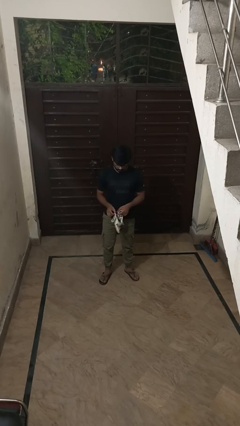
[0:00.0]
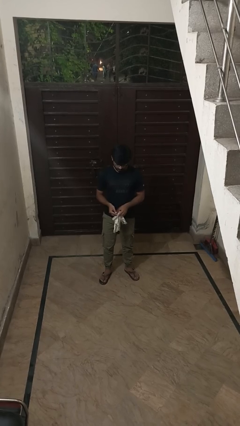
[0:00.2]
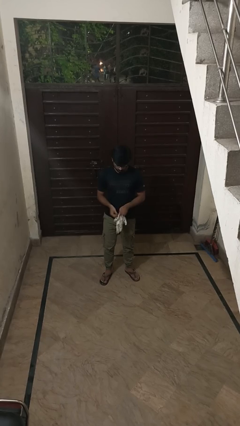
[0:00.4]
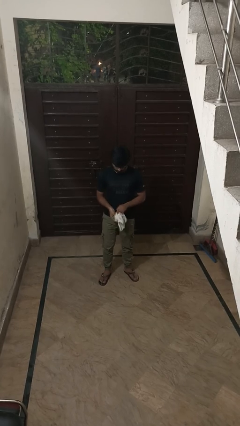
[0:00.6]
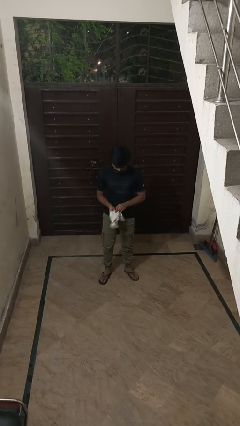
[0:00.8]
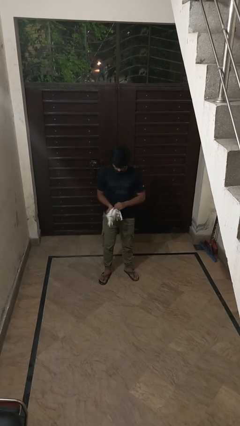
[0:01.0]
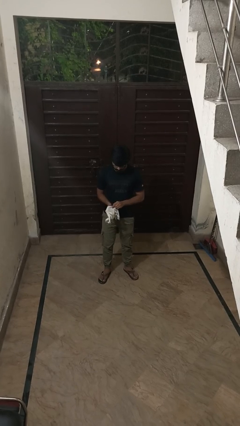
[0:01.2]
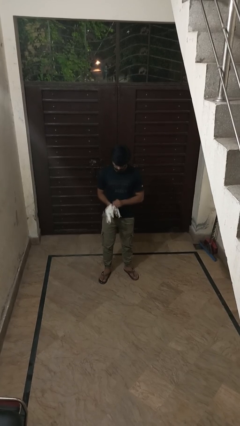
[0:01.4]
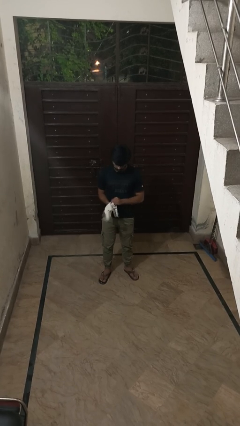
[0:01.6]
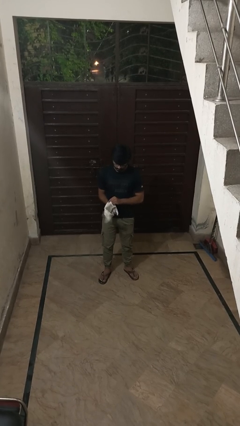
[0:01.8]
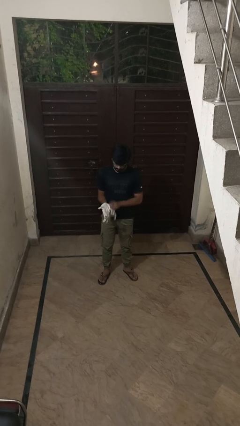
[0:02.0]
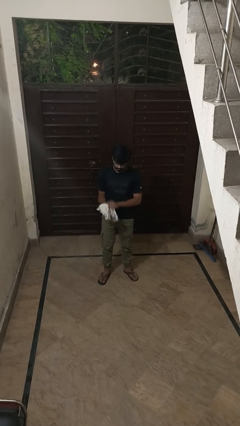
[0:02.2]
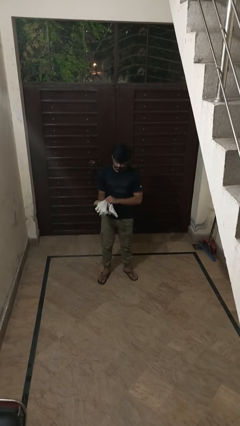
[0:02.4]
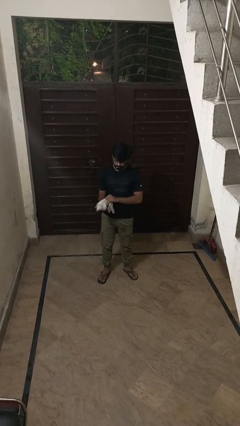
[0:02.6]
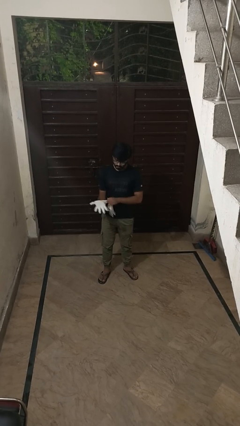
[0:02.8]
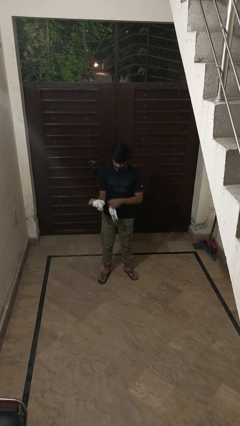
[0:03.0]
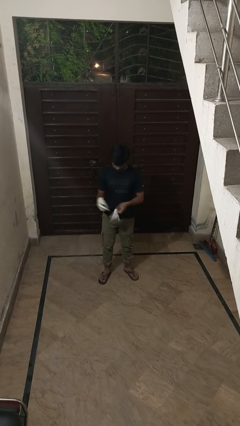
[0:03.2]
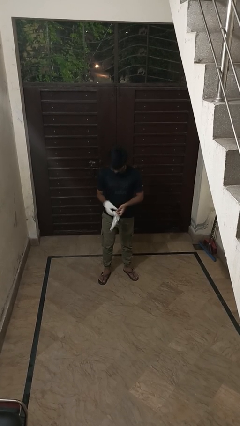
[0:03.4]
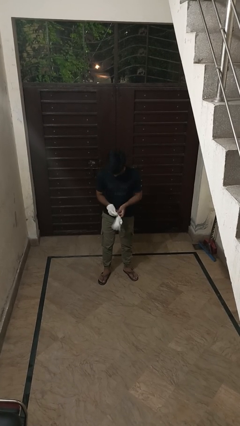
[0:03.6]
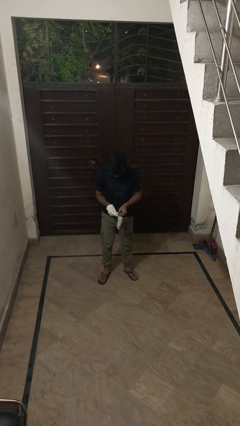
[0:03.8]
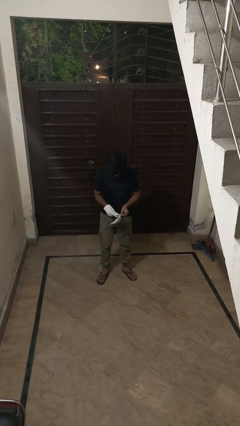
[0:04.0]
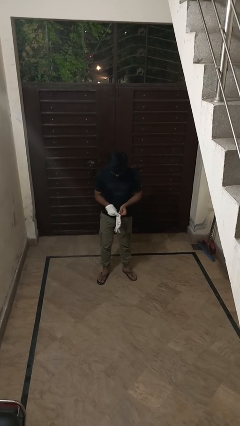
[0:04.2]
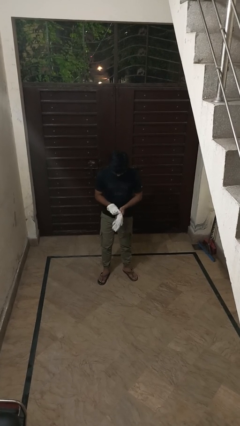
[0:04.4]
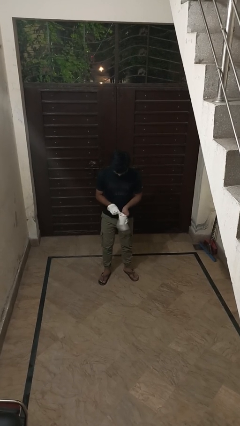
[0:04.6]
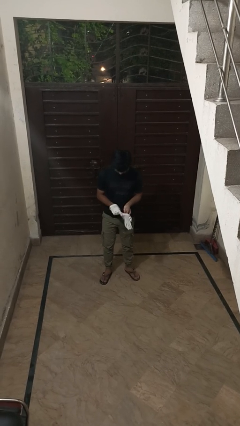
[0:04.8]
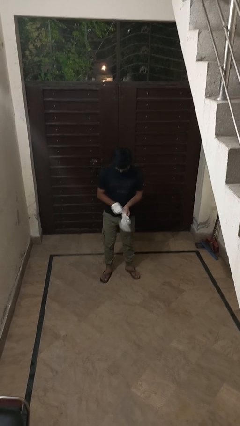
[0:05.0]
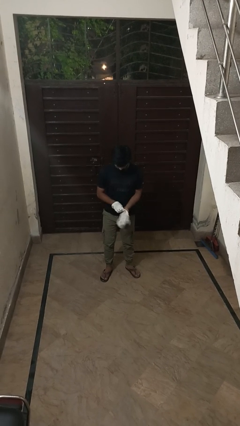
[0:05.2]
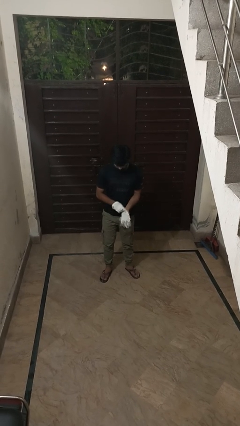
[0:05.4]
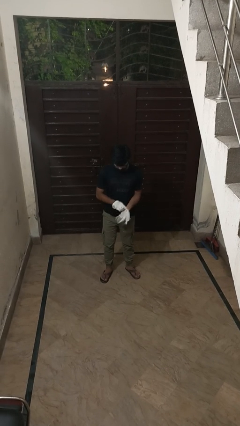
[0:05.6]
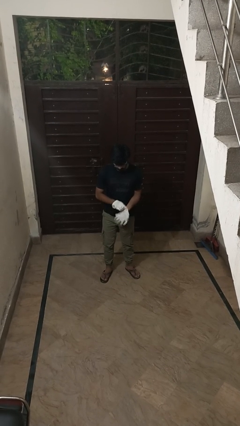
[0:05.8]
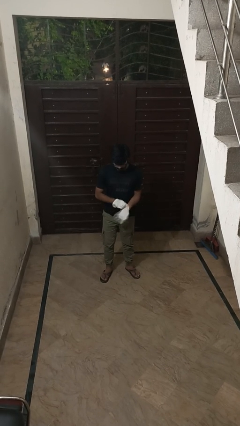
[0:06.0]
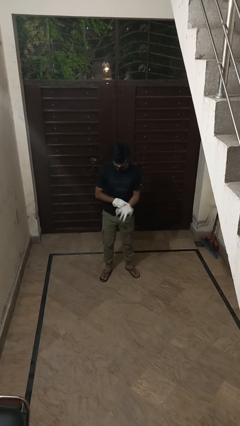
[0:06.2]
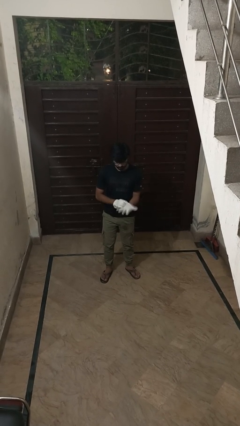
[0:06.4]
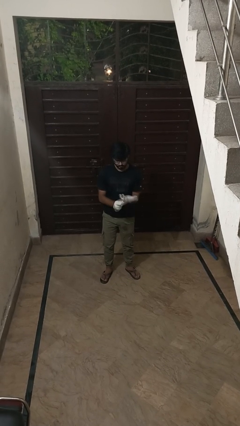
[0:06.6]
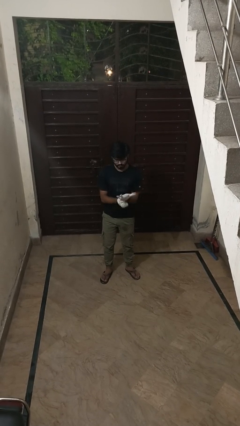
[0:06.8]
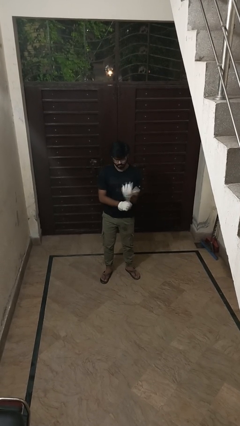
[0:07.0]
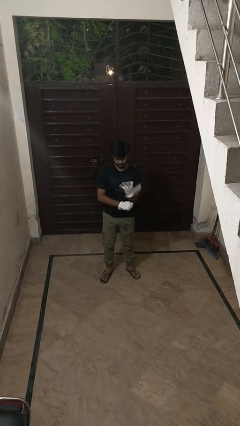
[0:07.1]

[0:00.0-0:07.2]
person puts on gloves

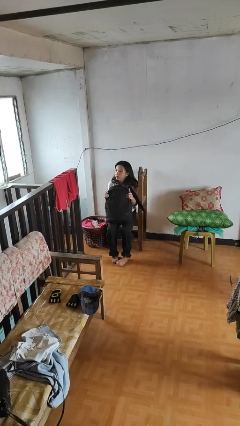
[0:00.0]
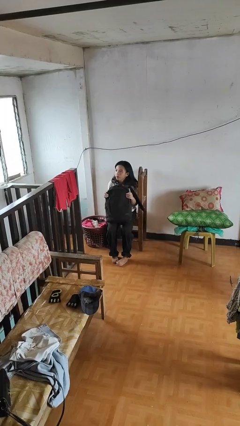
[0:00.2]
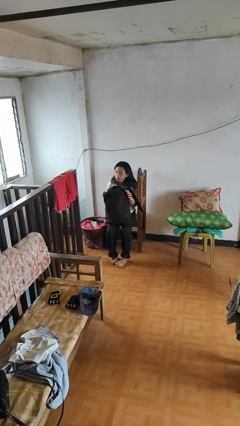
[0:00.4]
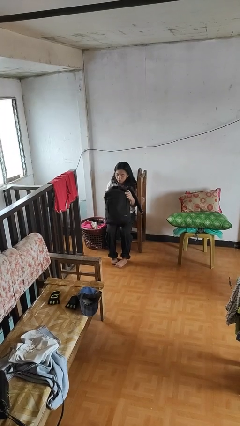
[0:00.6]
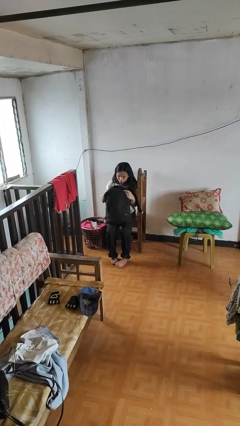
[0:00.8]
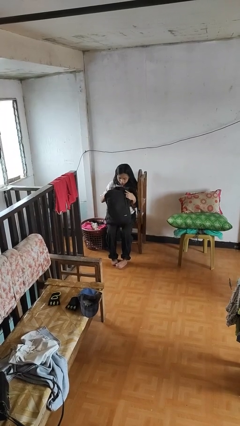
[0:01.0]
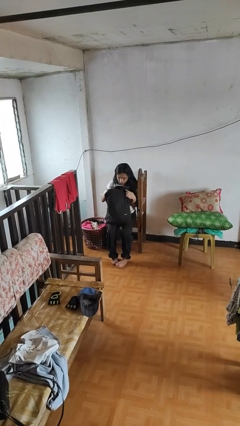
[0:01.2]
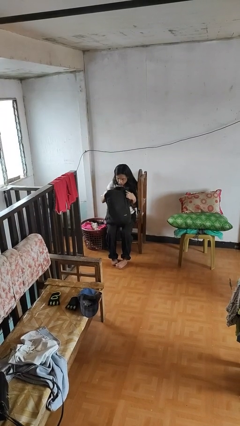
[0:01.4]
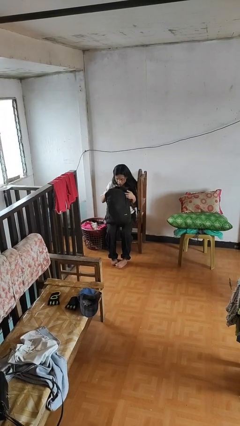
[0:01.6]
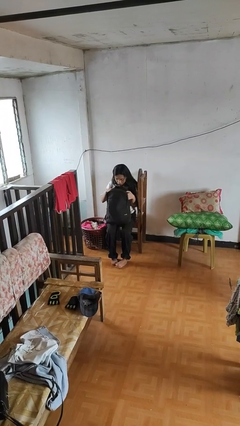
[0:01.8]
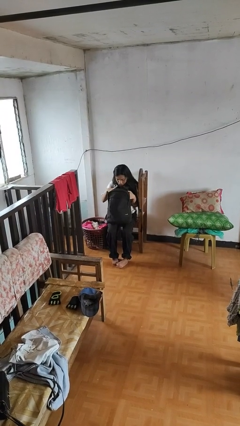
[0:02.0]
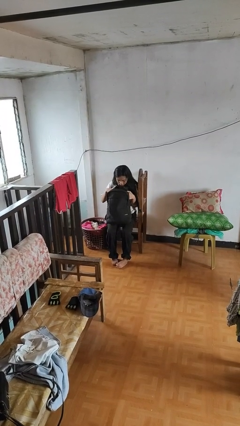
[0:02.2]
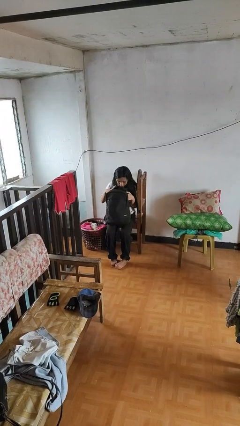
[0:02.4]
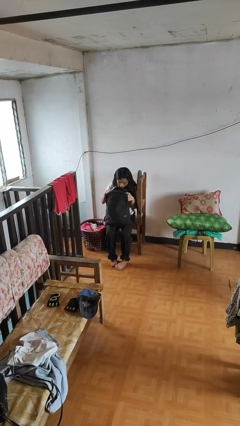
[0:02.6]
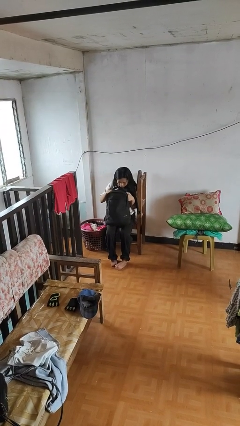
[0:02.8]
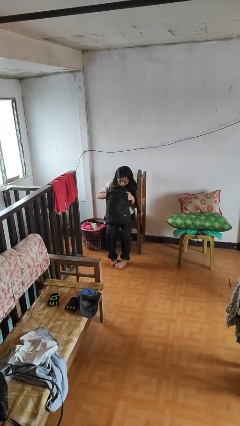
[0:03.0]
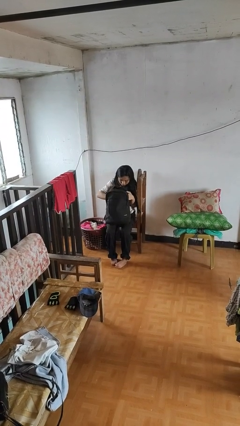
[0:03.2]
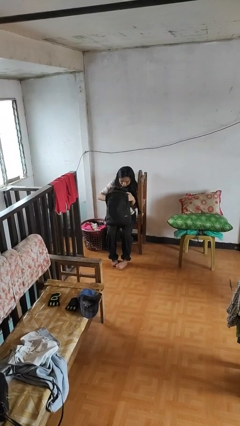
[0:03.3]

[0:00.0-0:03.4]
person searches in backpack

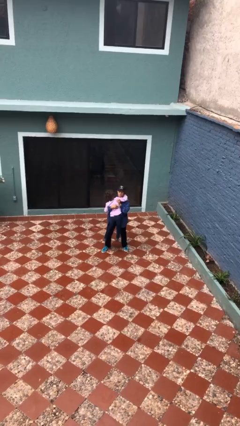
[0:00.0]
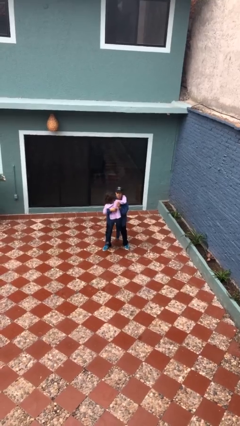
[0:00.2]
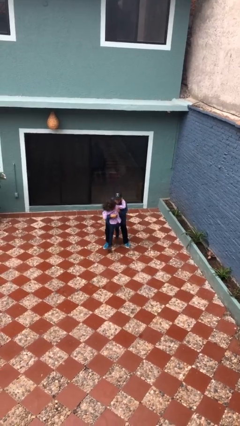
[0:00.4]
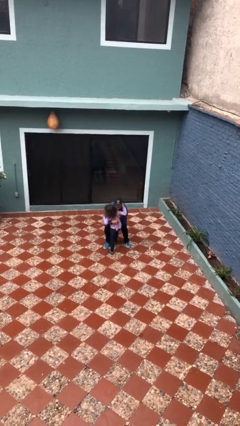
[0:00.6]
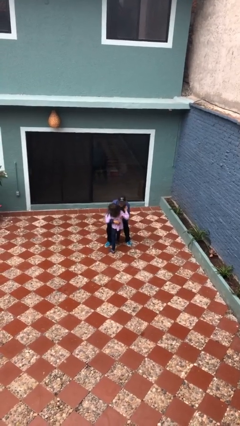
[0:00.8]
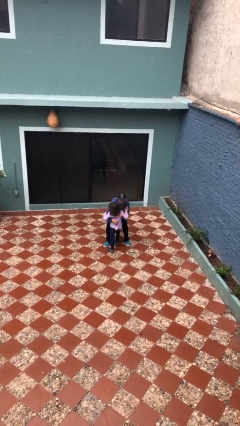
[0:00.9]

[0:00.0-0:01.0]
person puts down person

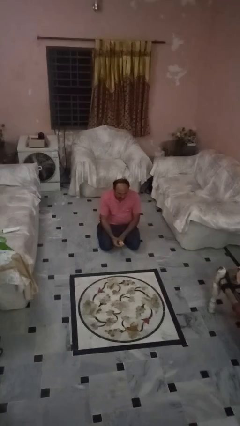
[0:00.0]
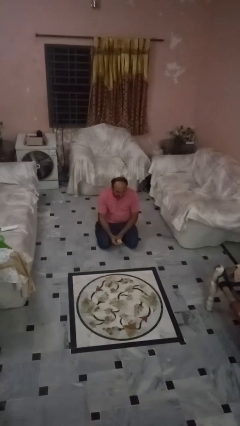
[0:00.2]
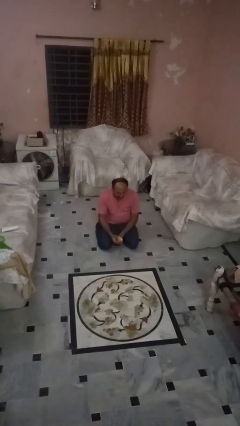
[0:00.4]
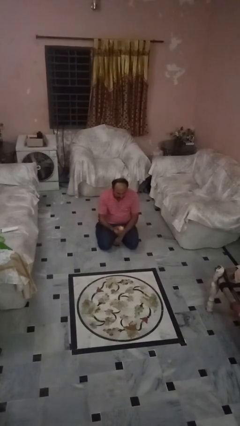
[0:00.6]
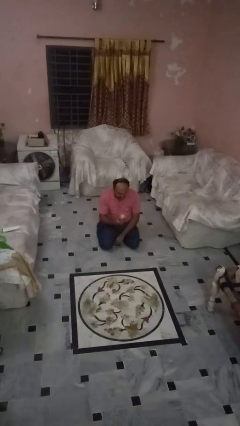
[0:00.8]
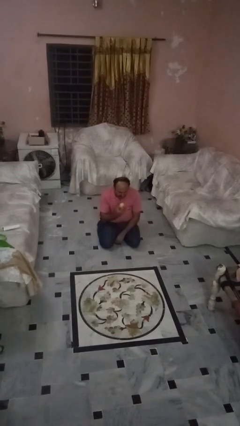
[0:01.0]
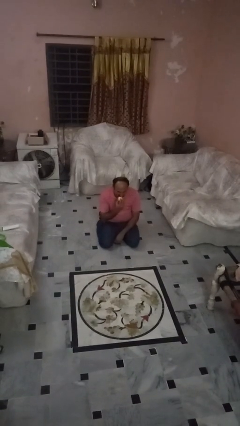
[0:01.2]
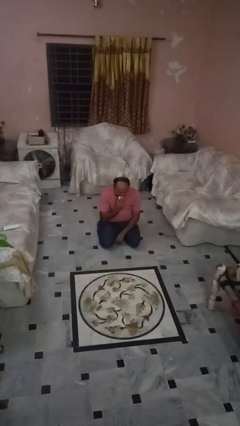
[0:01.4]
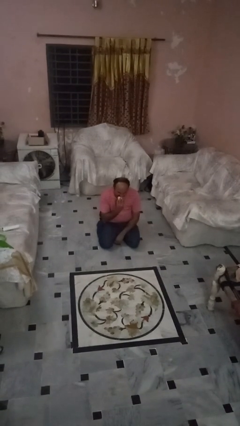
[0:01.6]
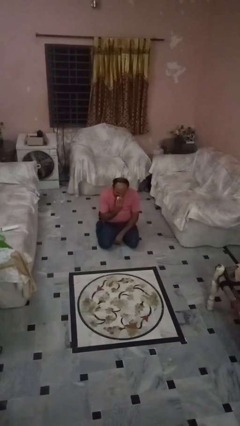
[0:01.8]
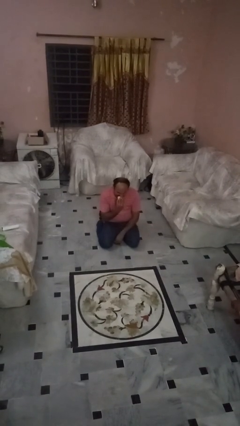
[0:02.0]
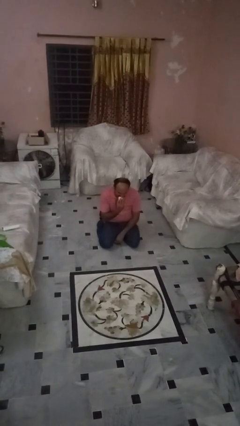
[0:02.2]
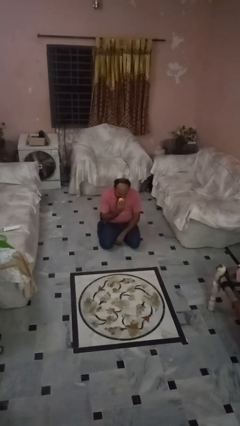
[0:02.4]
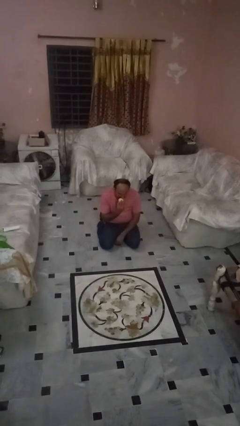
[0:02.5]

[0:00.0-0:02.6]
person eats apple

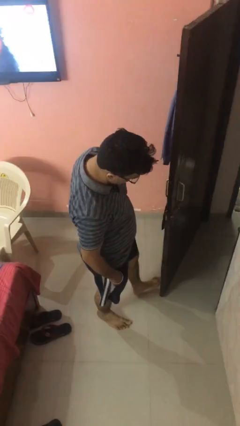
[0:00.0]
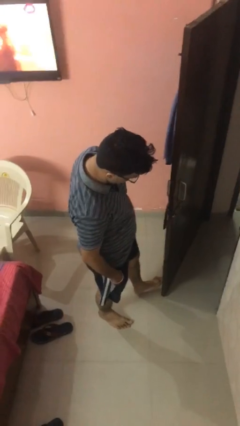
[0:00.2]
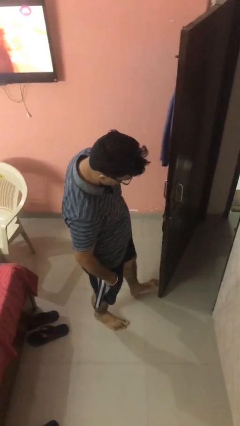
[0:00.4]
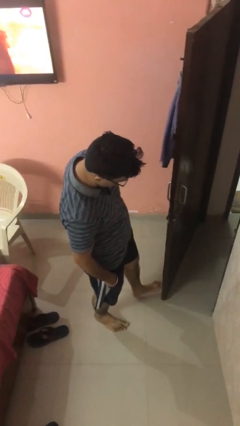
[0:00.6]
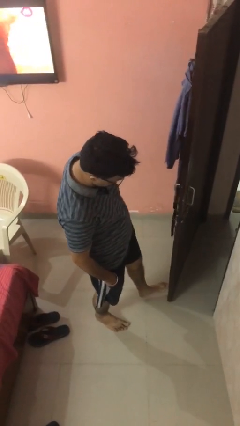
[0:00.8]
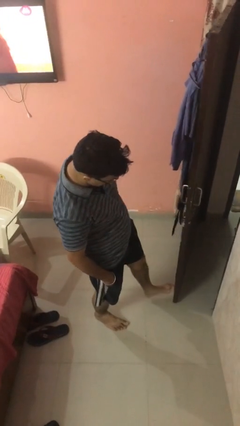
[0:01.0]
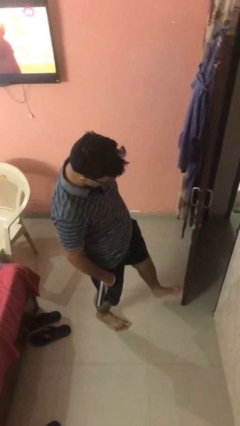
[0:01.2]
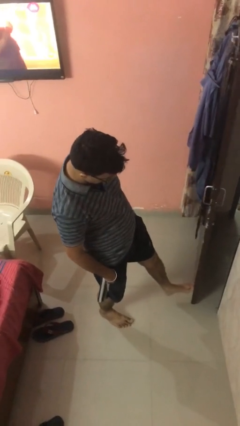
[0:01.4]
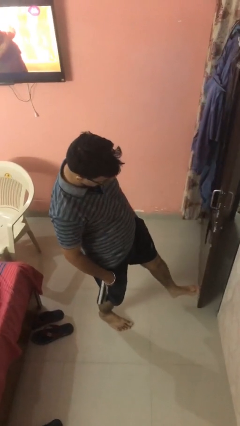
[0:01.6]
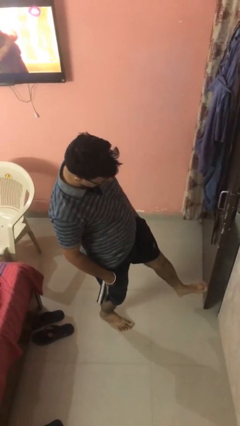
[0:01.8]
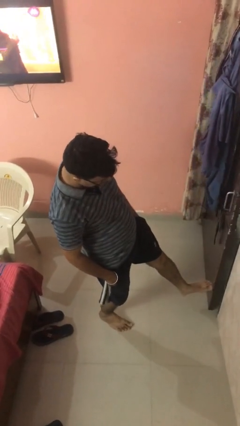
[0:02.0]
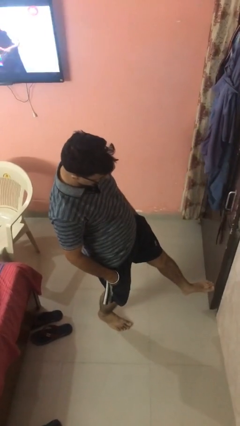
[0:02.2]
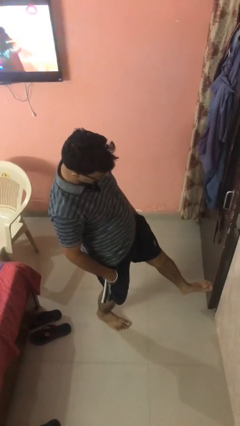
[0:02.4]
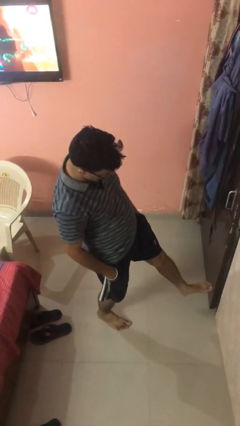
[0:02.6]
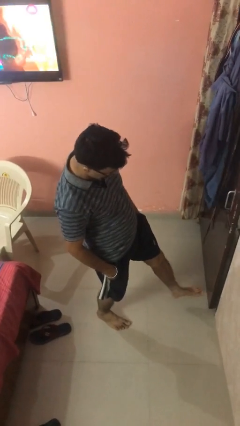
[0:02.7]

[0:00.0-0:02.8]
person closes door with foot

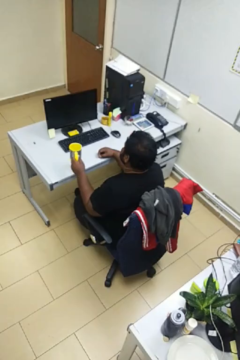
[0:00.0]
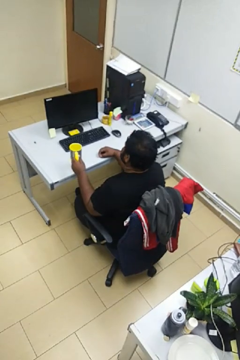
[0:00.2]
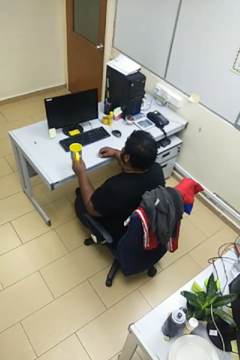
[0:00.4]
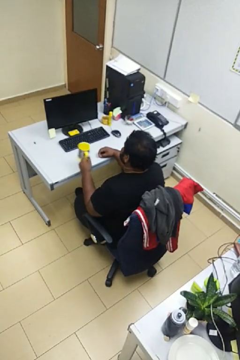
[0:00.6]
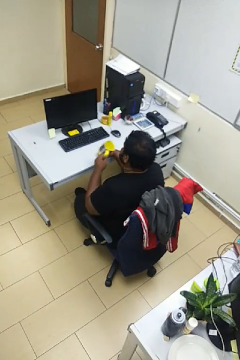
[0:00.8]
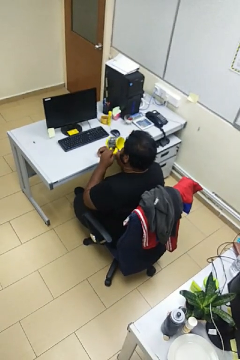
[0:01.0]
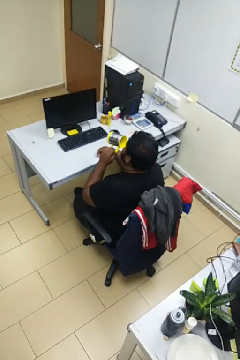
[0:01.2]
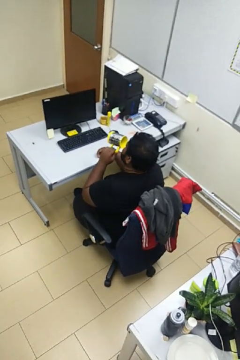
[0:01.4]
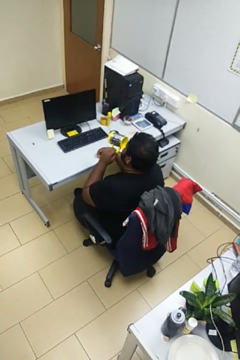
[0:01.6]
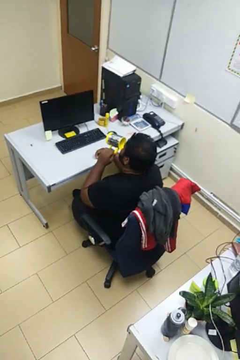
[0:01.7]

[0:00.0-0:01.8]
person drinks from mug
